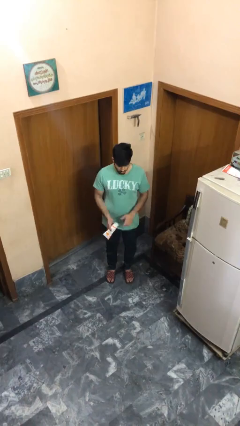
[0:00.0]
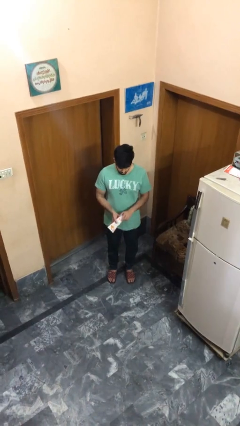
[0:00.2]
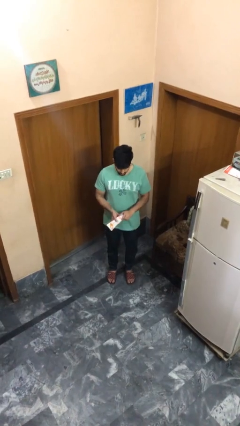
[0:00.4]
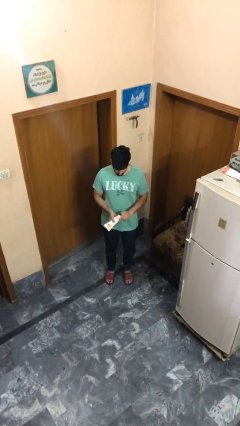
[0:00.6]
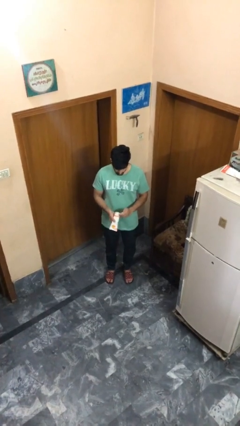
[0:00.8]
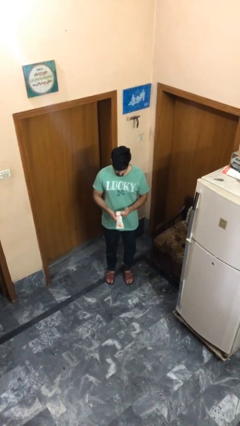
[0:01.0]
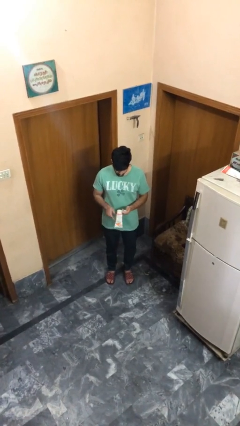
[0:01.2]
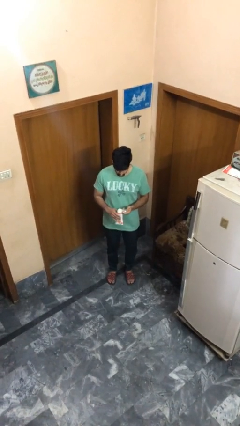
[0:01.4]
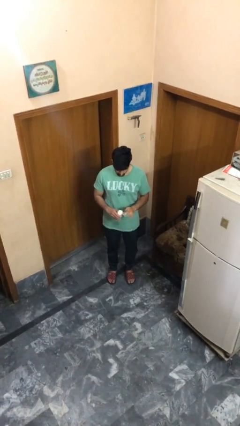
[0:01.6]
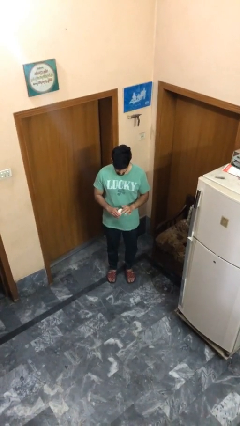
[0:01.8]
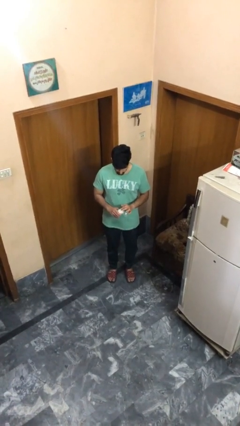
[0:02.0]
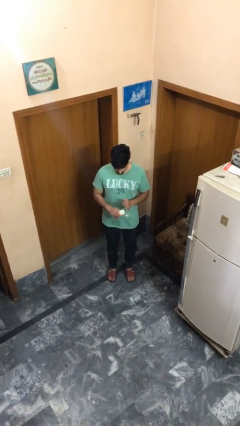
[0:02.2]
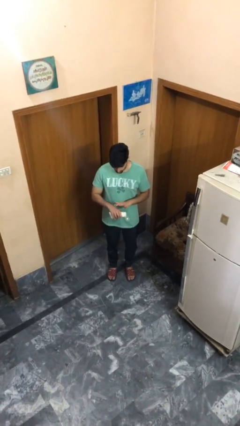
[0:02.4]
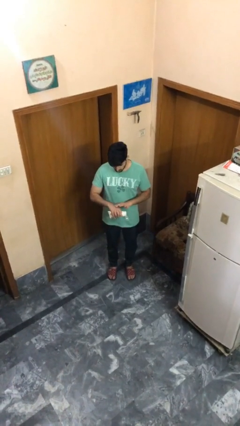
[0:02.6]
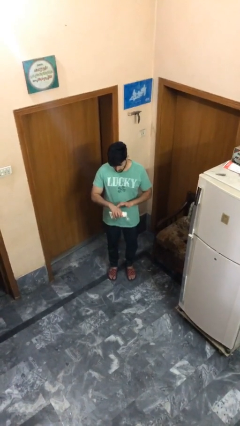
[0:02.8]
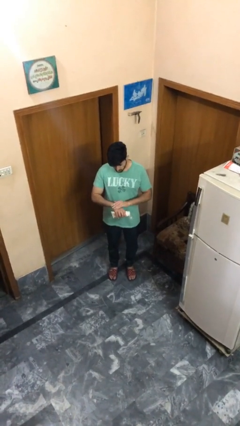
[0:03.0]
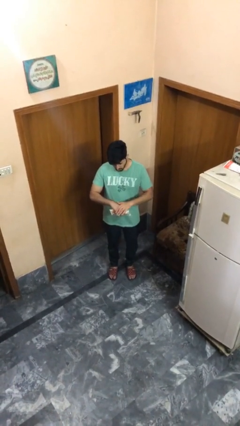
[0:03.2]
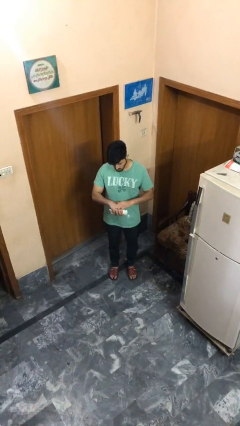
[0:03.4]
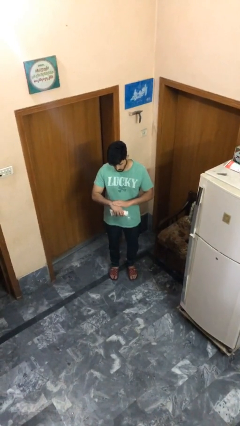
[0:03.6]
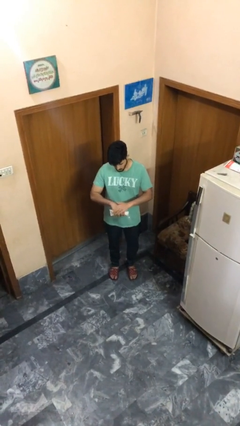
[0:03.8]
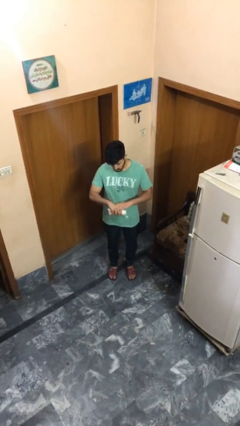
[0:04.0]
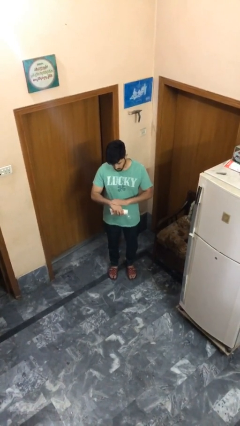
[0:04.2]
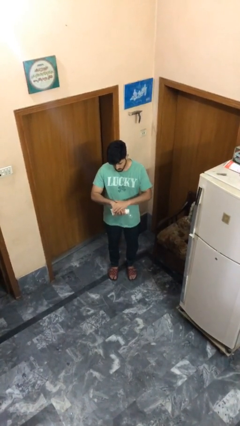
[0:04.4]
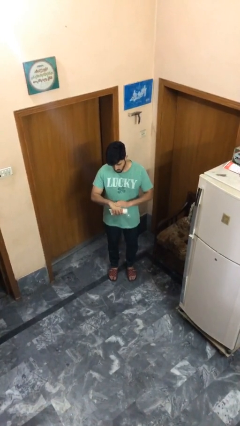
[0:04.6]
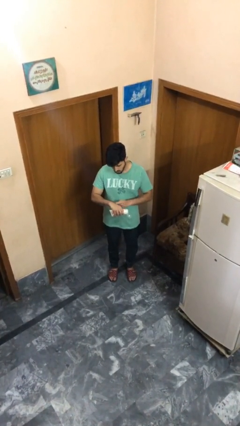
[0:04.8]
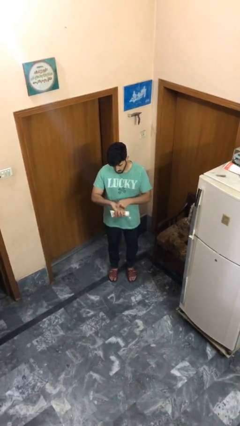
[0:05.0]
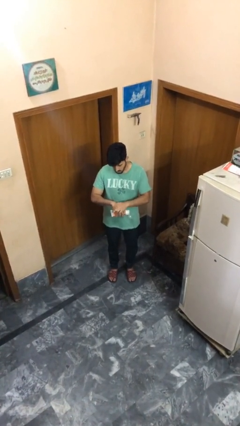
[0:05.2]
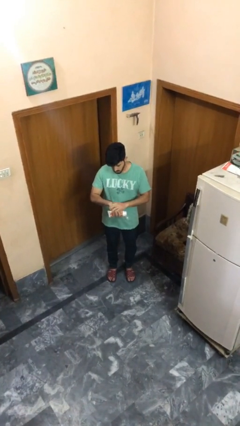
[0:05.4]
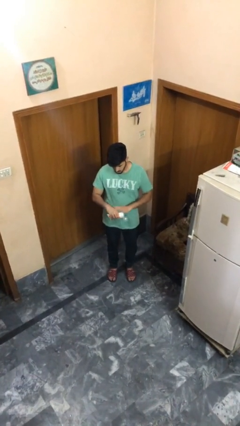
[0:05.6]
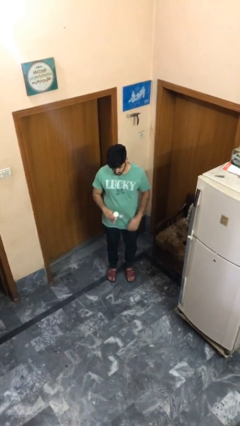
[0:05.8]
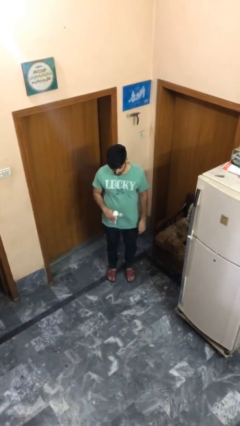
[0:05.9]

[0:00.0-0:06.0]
person applies sunscreen

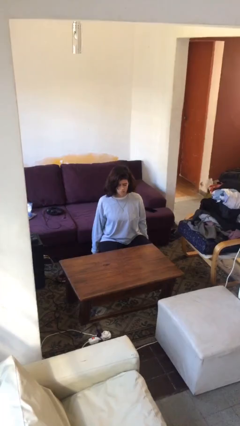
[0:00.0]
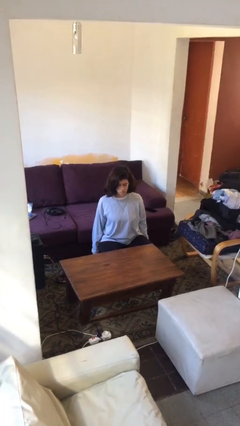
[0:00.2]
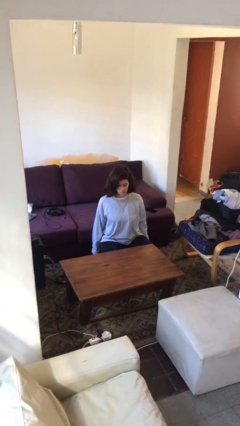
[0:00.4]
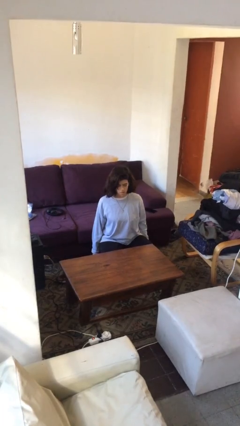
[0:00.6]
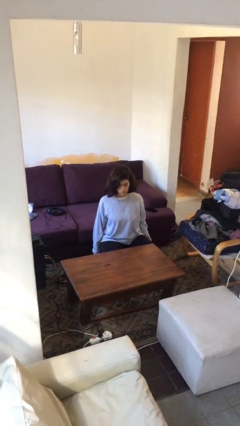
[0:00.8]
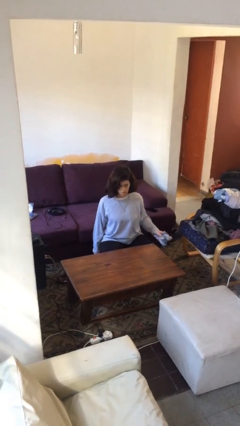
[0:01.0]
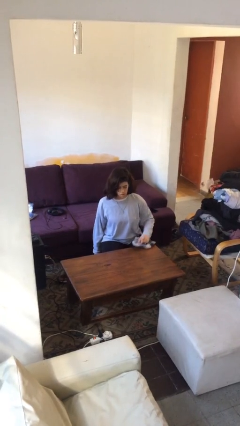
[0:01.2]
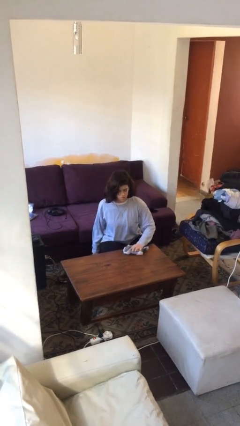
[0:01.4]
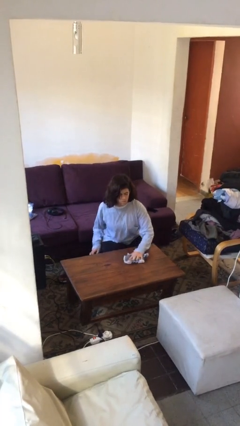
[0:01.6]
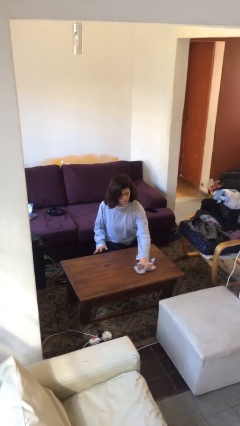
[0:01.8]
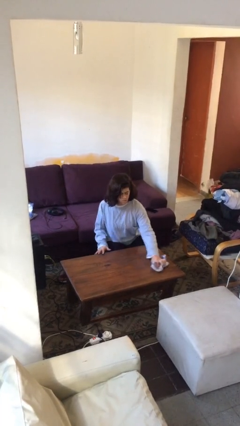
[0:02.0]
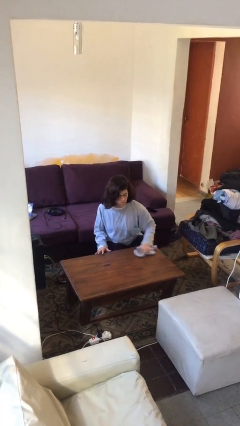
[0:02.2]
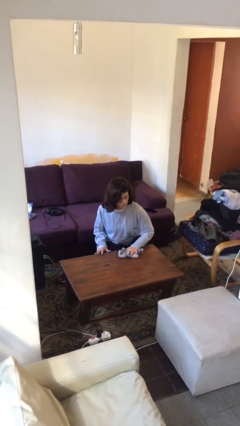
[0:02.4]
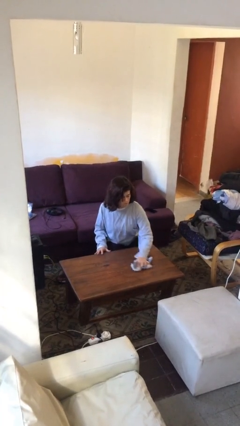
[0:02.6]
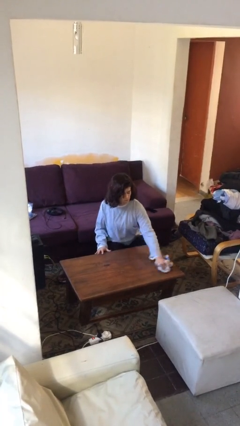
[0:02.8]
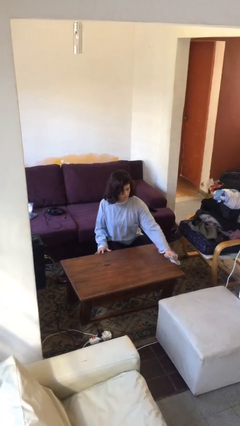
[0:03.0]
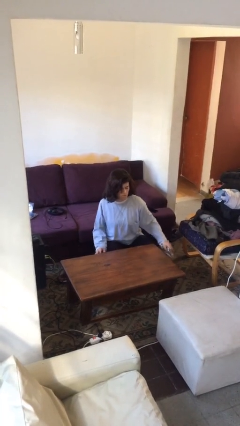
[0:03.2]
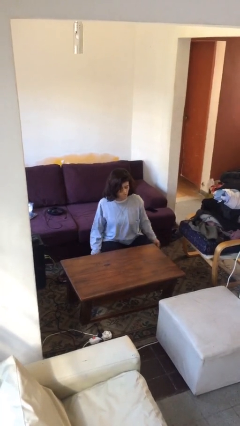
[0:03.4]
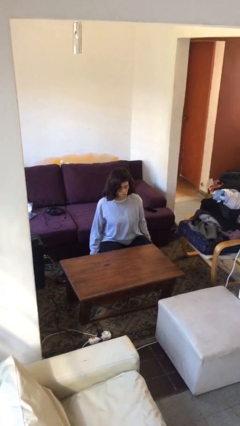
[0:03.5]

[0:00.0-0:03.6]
person cleans table with rag

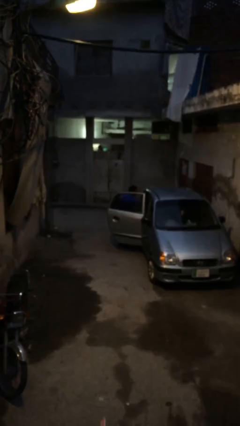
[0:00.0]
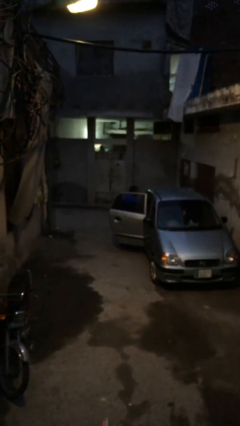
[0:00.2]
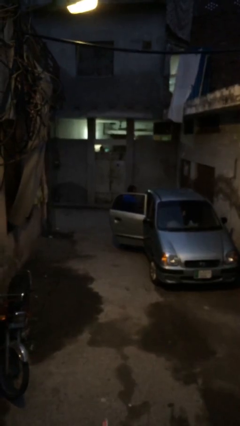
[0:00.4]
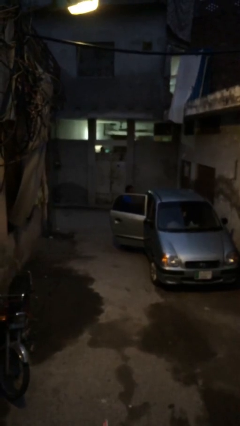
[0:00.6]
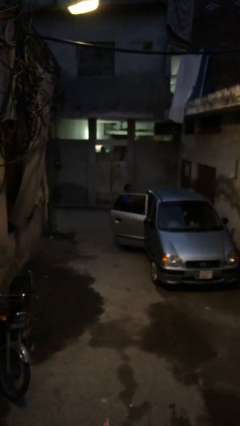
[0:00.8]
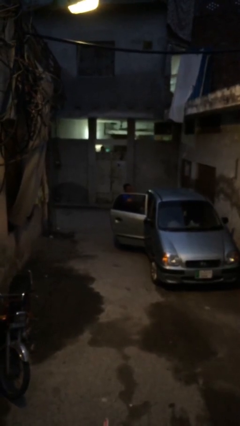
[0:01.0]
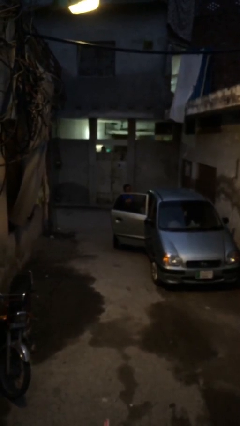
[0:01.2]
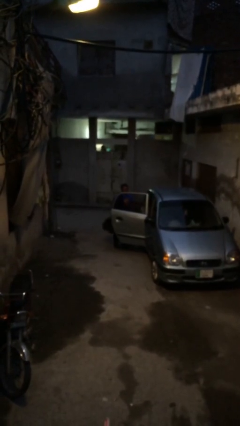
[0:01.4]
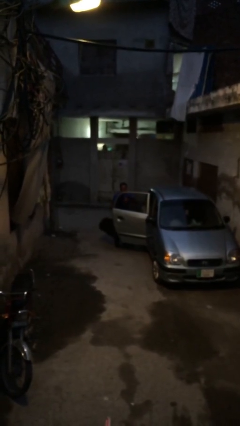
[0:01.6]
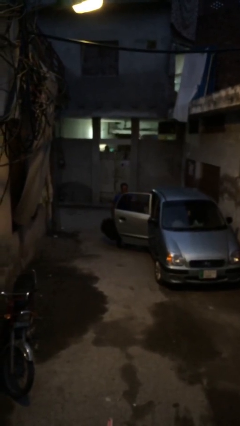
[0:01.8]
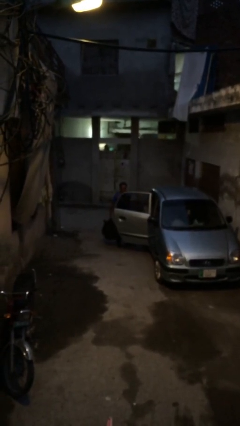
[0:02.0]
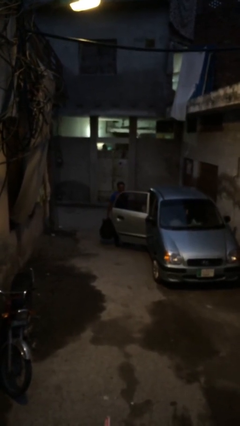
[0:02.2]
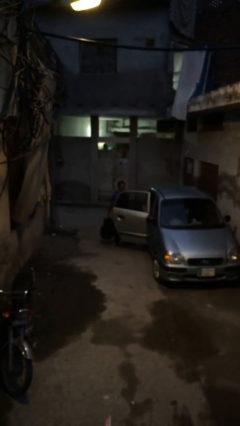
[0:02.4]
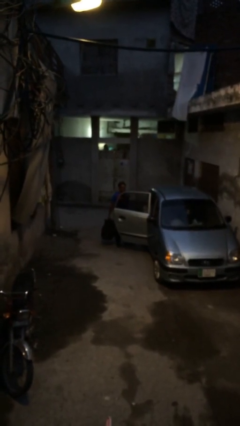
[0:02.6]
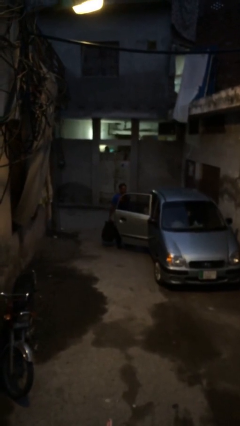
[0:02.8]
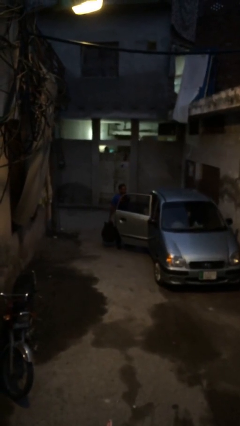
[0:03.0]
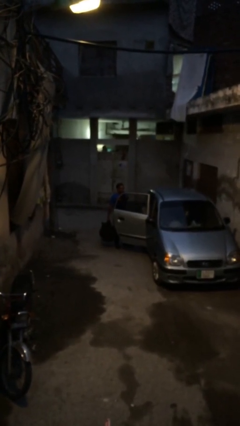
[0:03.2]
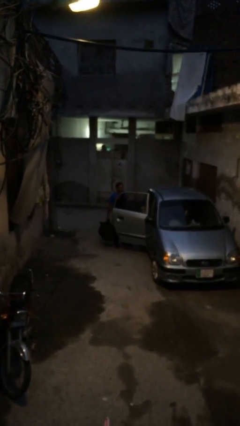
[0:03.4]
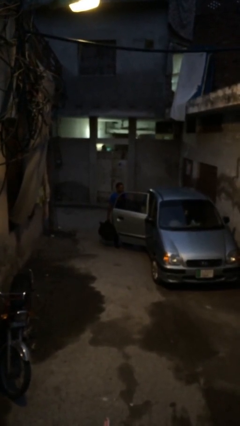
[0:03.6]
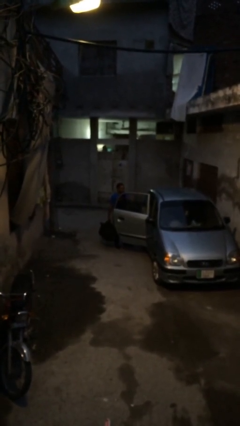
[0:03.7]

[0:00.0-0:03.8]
person unloads car

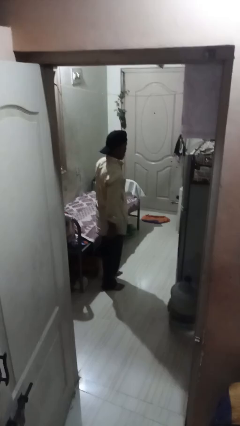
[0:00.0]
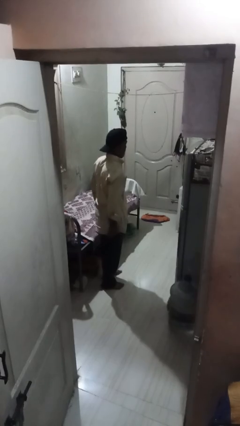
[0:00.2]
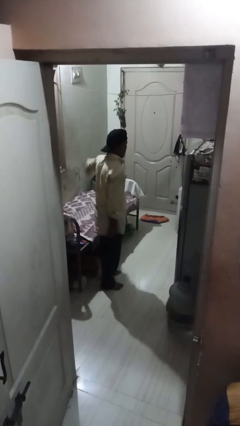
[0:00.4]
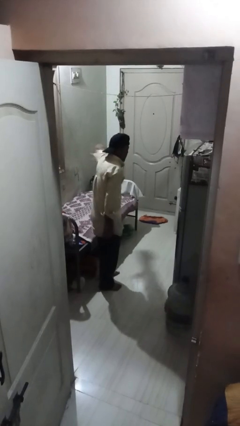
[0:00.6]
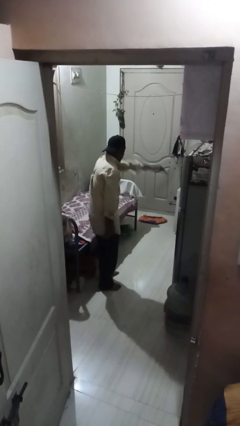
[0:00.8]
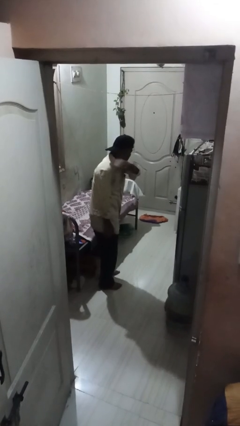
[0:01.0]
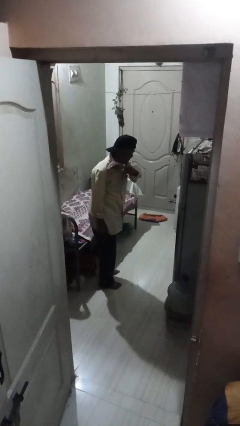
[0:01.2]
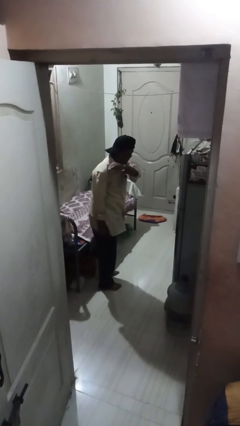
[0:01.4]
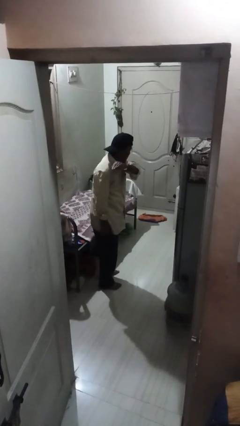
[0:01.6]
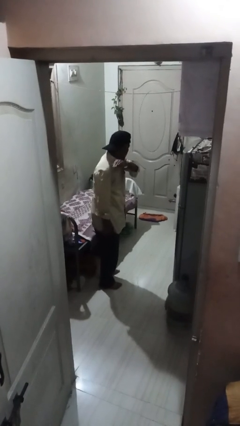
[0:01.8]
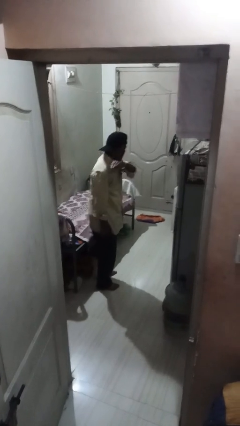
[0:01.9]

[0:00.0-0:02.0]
person karate chop

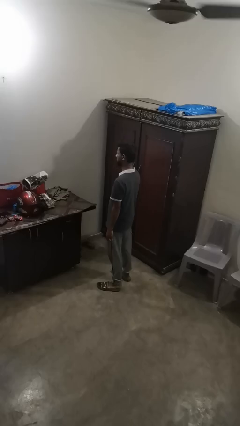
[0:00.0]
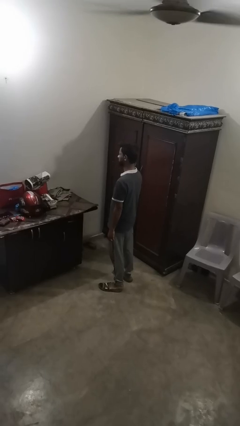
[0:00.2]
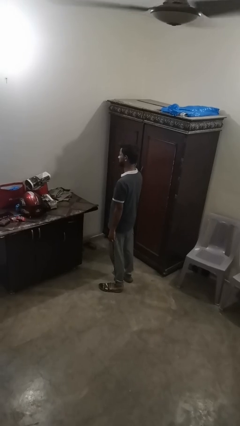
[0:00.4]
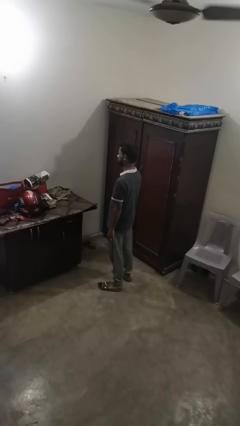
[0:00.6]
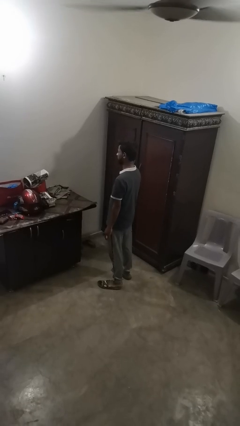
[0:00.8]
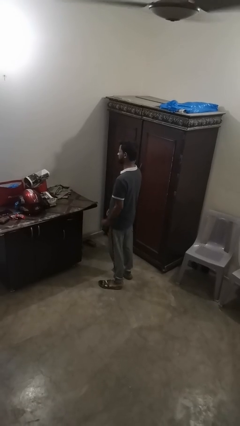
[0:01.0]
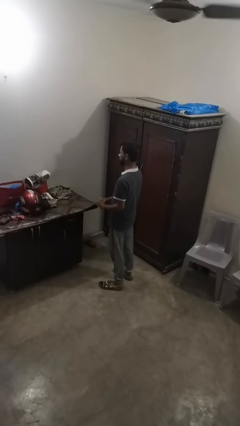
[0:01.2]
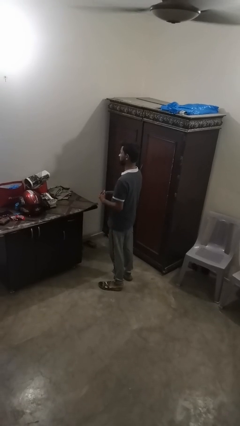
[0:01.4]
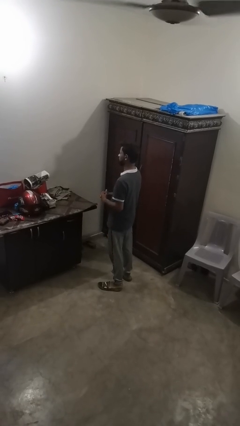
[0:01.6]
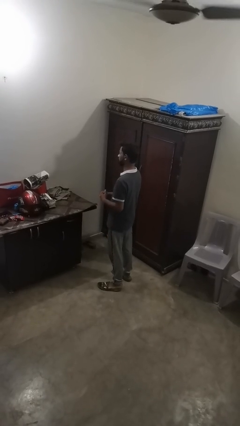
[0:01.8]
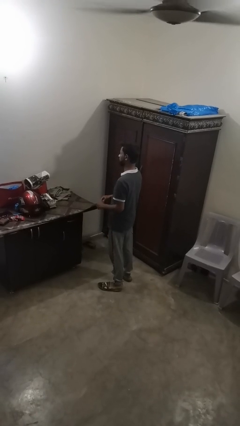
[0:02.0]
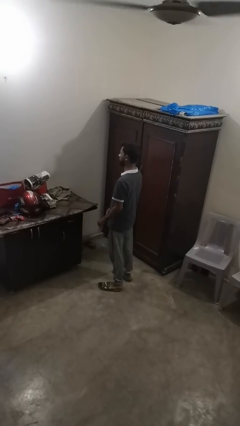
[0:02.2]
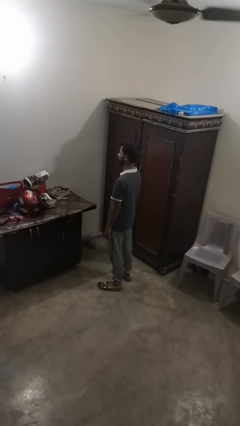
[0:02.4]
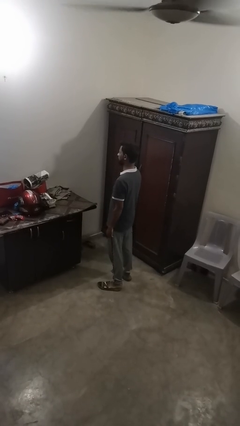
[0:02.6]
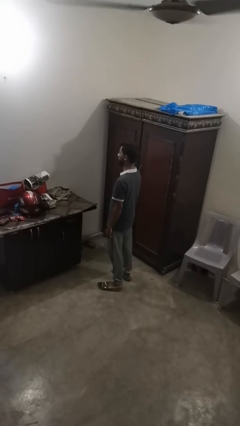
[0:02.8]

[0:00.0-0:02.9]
person takes off ring
